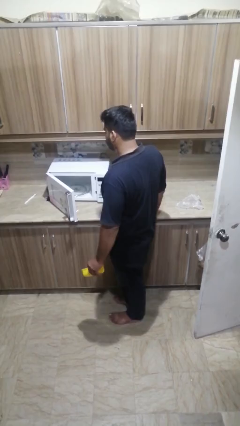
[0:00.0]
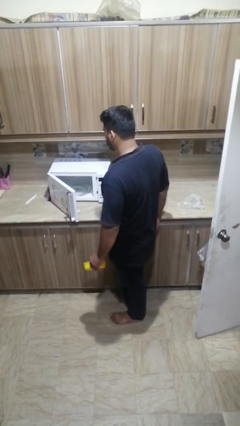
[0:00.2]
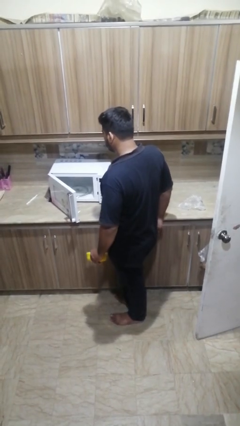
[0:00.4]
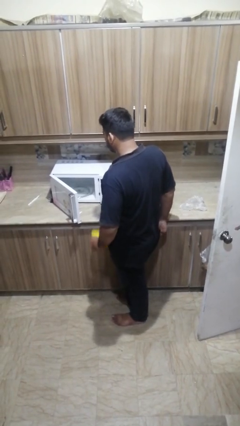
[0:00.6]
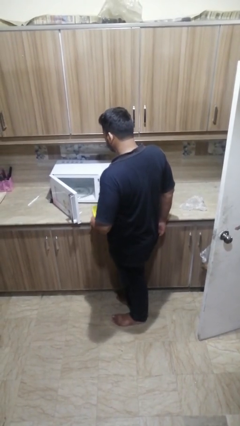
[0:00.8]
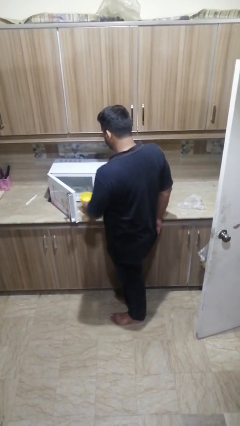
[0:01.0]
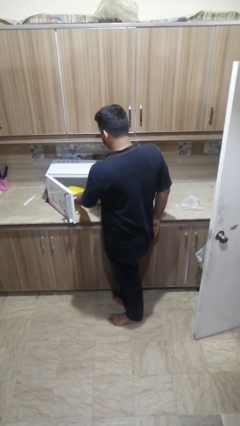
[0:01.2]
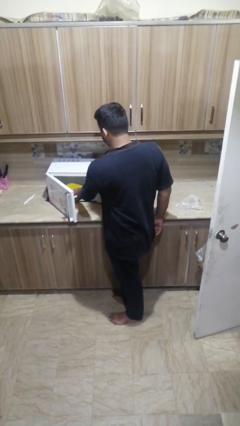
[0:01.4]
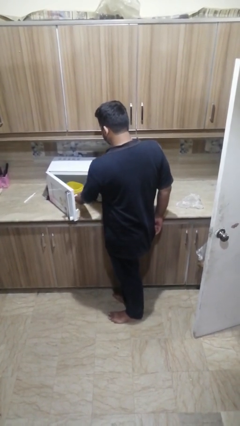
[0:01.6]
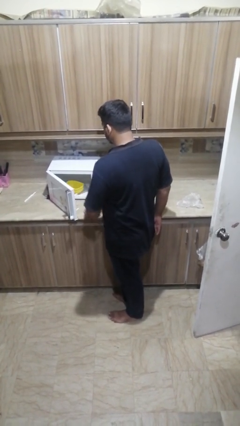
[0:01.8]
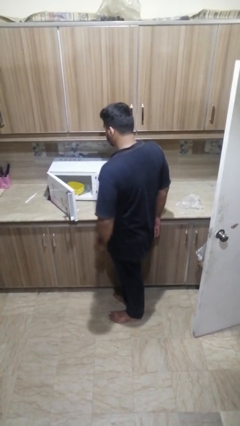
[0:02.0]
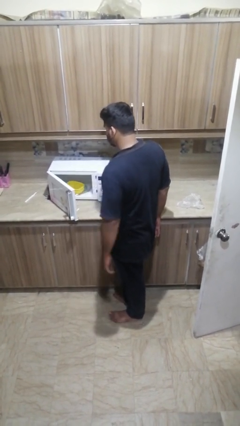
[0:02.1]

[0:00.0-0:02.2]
person puts object into microwave

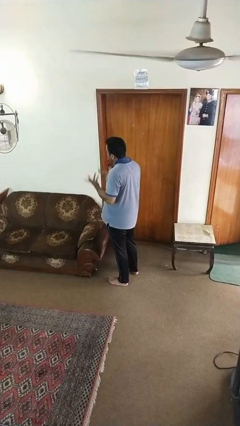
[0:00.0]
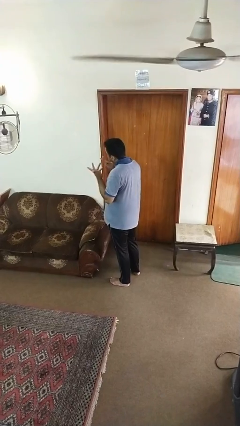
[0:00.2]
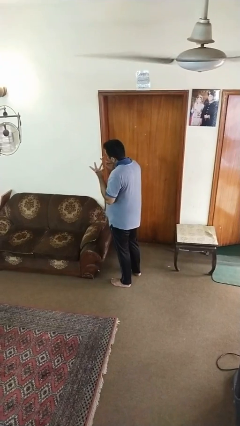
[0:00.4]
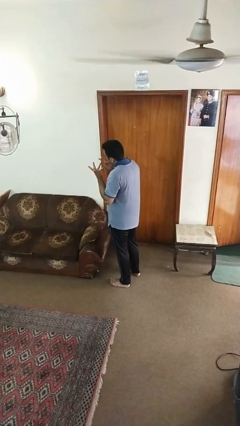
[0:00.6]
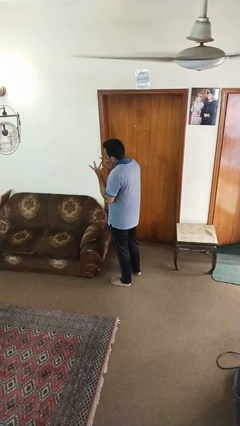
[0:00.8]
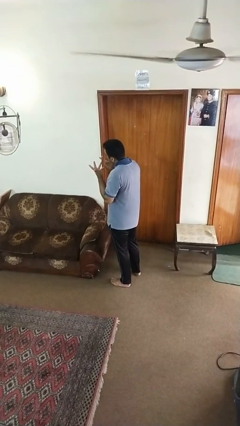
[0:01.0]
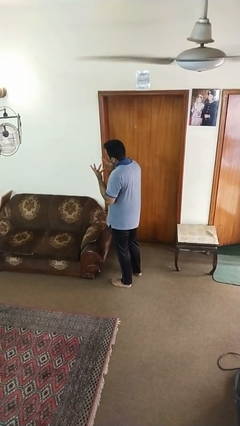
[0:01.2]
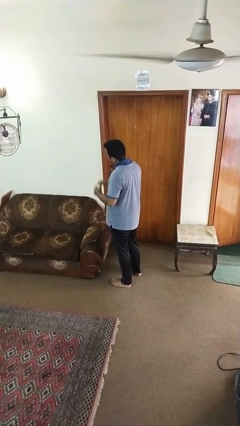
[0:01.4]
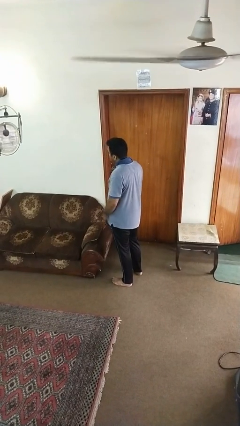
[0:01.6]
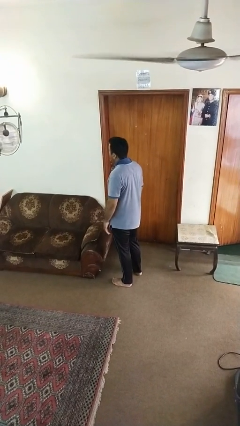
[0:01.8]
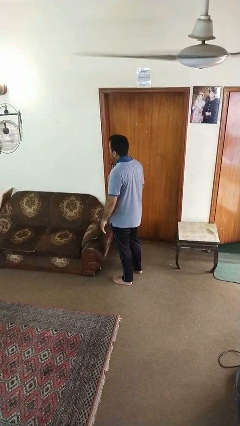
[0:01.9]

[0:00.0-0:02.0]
person shrugs

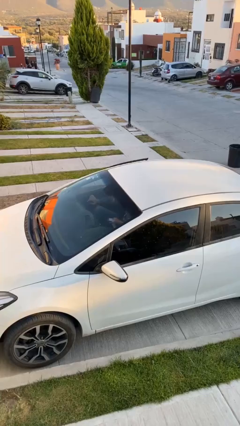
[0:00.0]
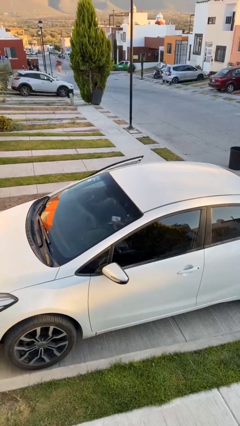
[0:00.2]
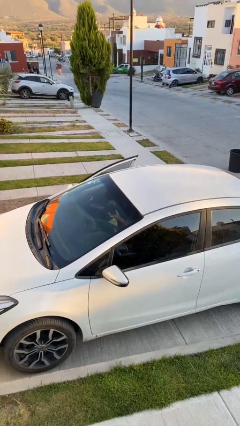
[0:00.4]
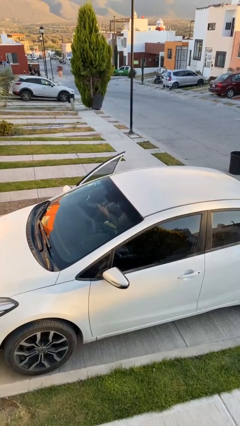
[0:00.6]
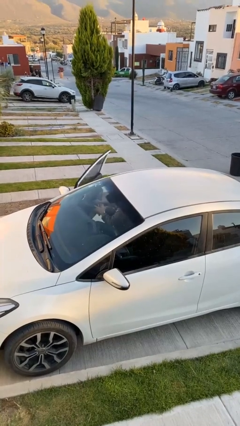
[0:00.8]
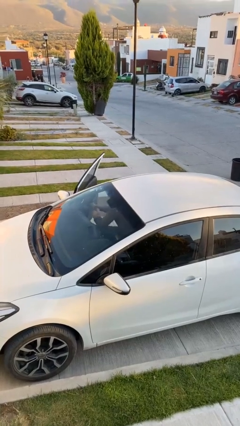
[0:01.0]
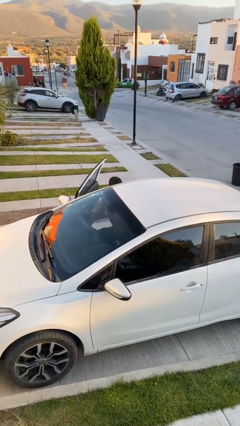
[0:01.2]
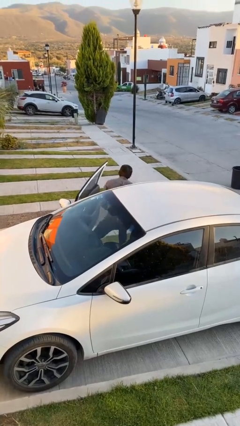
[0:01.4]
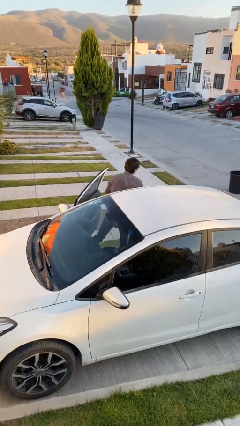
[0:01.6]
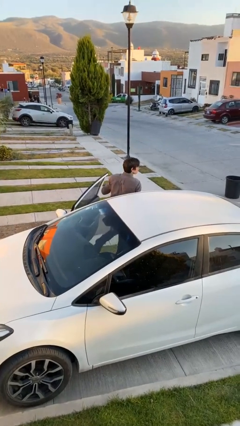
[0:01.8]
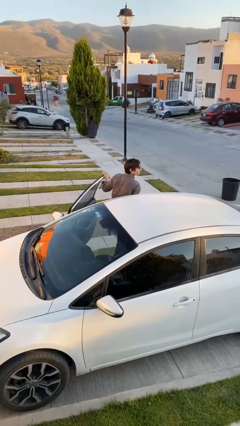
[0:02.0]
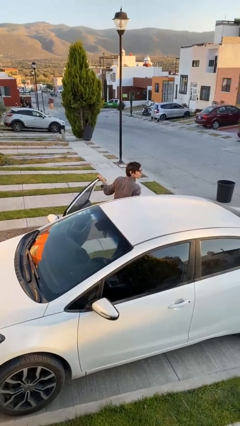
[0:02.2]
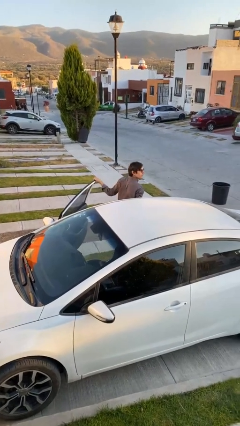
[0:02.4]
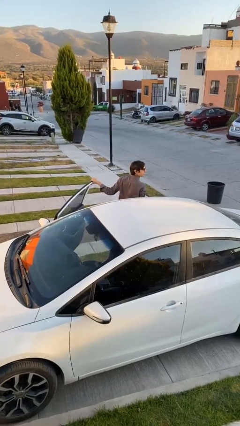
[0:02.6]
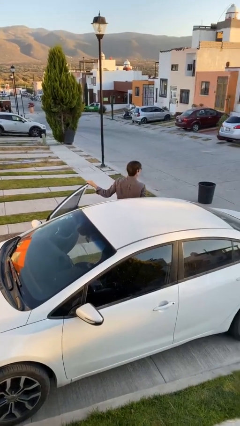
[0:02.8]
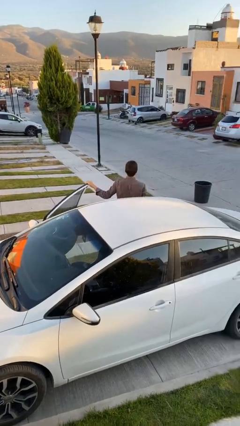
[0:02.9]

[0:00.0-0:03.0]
car drops off person

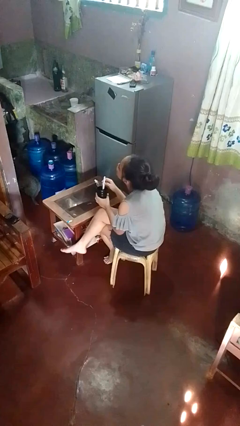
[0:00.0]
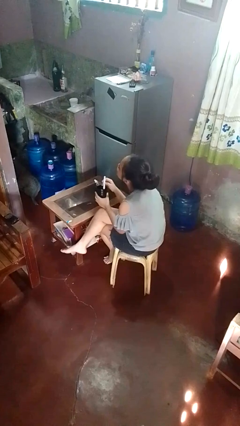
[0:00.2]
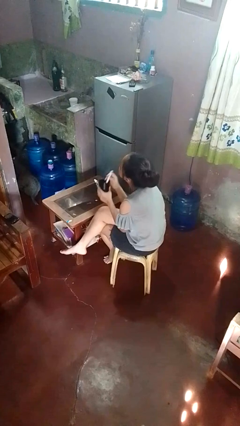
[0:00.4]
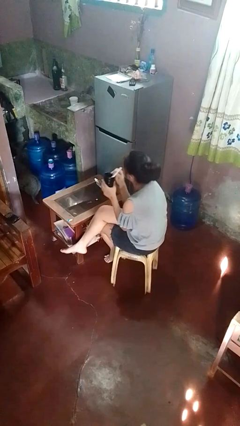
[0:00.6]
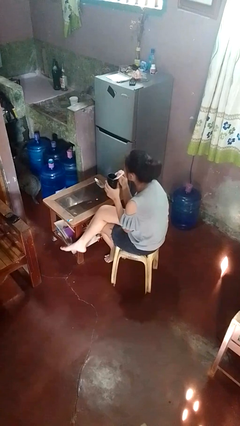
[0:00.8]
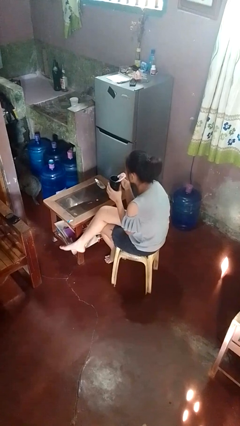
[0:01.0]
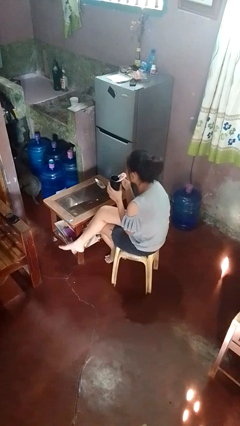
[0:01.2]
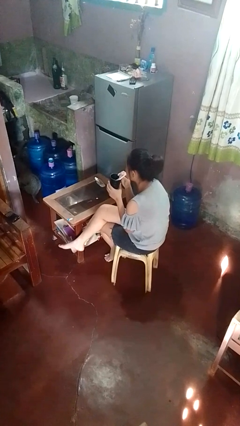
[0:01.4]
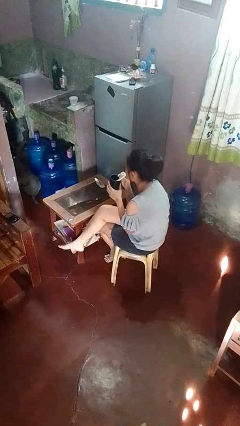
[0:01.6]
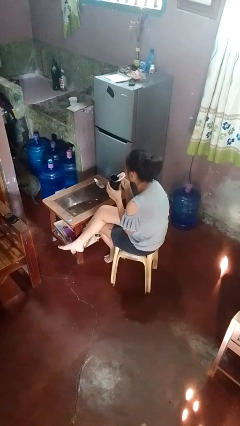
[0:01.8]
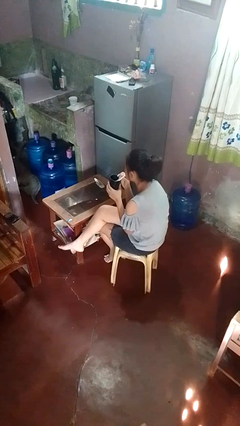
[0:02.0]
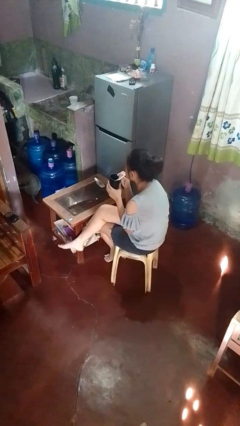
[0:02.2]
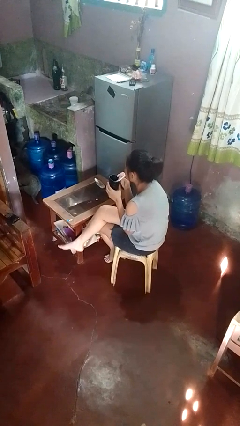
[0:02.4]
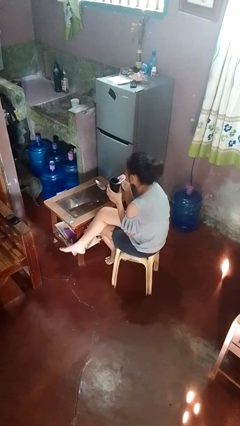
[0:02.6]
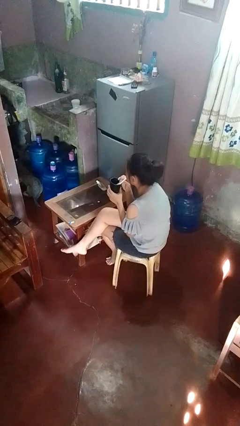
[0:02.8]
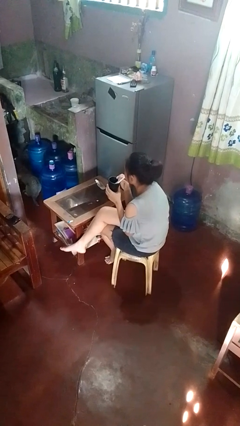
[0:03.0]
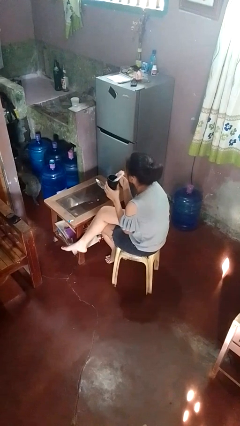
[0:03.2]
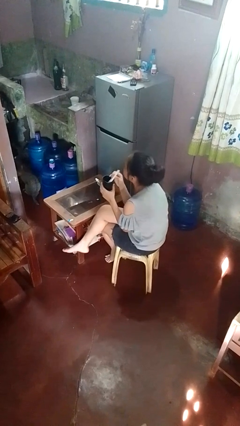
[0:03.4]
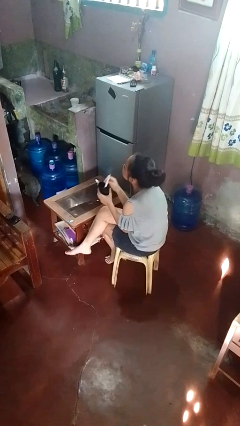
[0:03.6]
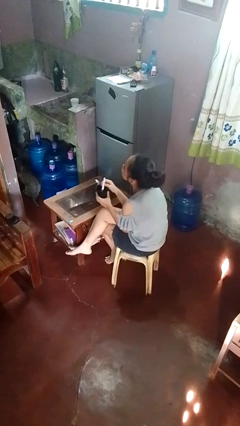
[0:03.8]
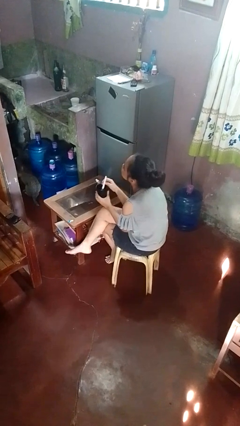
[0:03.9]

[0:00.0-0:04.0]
person drinks from straw

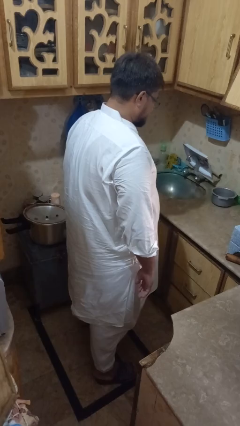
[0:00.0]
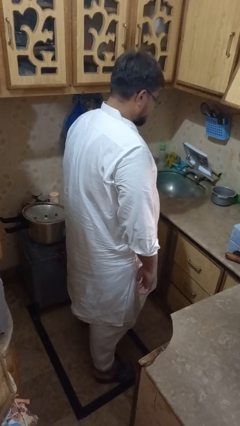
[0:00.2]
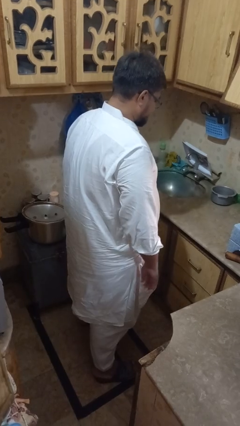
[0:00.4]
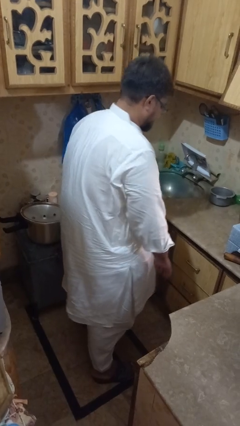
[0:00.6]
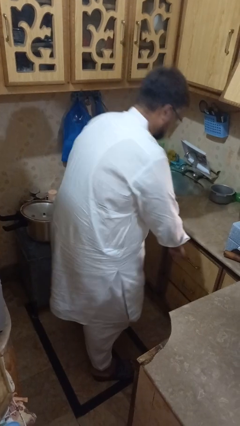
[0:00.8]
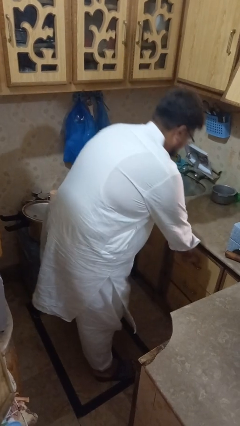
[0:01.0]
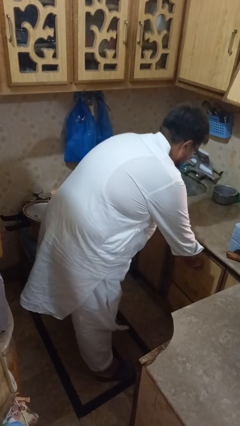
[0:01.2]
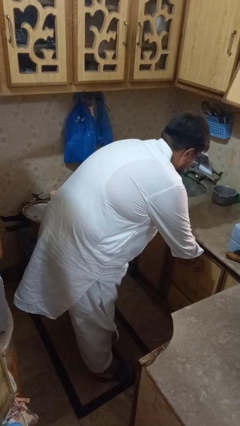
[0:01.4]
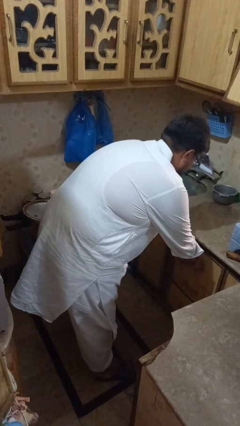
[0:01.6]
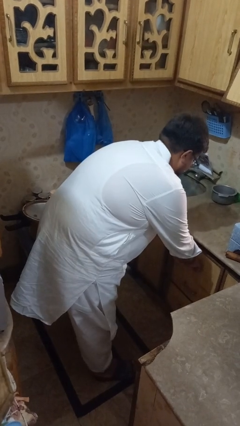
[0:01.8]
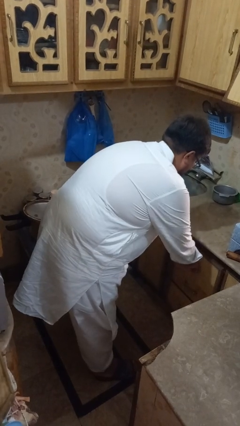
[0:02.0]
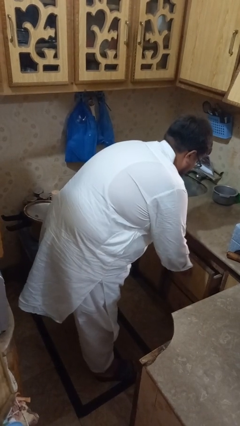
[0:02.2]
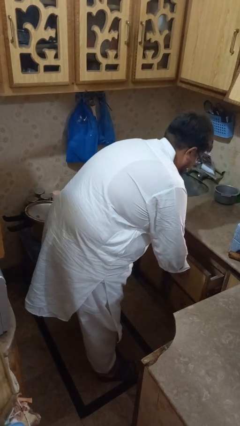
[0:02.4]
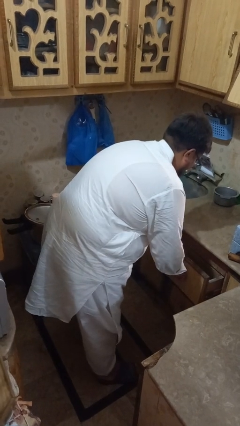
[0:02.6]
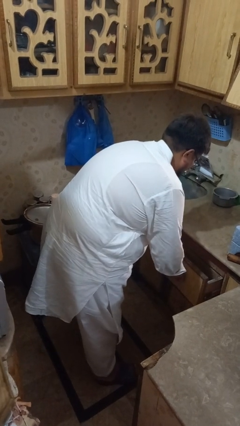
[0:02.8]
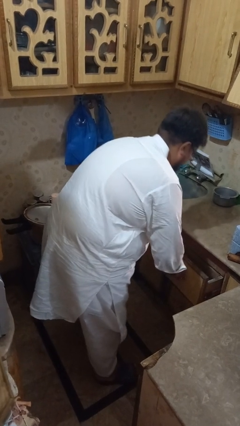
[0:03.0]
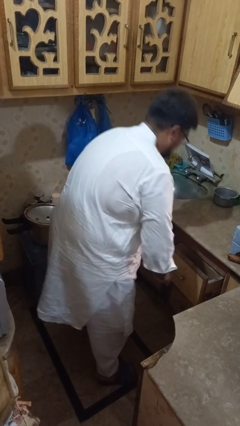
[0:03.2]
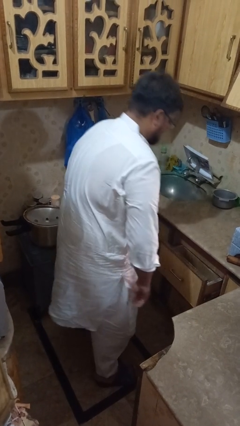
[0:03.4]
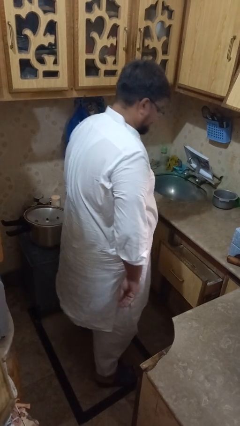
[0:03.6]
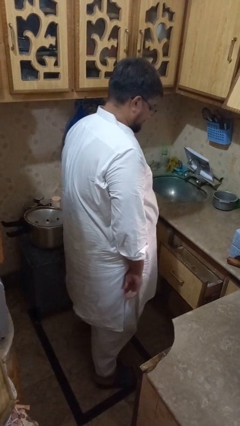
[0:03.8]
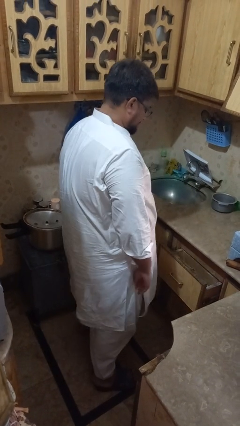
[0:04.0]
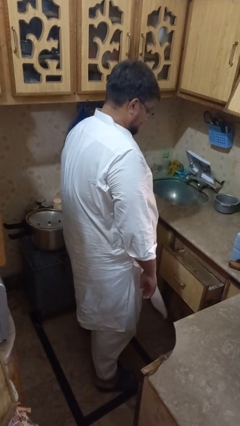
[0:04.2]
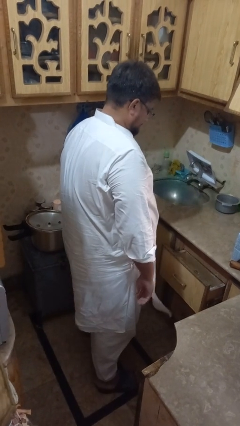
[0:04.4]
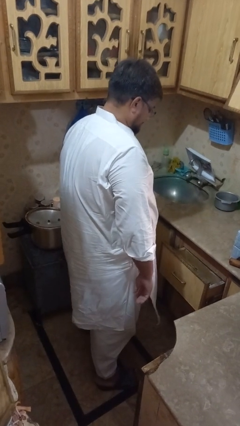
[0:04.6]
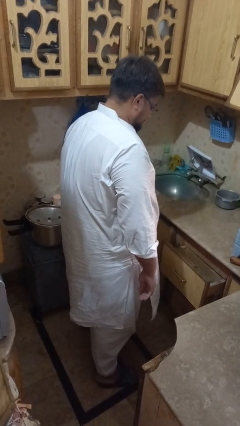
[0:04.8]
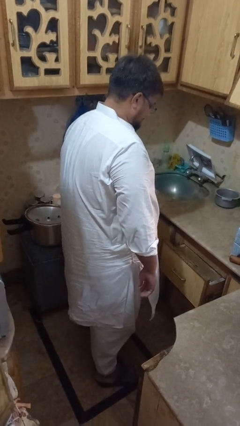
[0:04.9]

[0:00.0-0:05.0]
person opens kitchen drawer

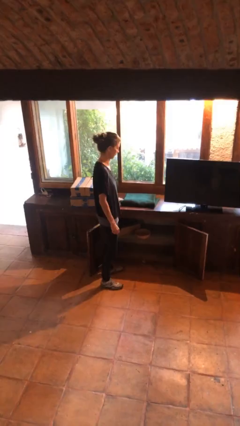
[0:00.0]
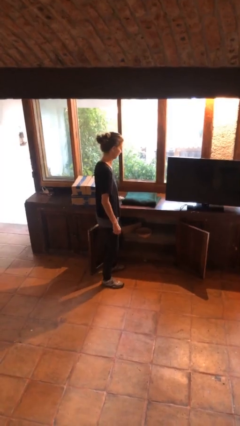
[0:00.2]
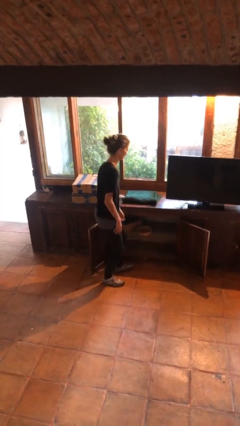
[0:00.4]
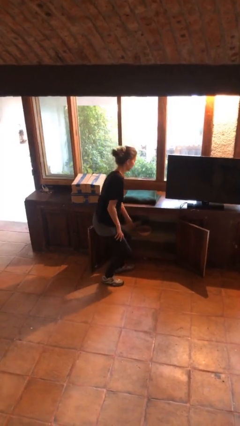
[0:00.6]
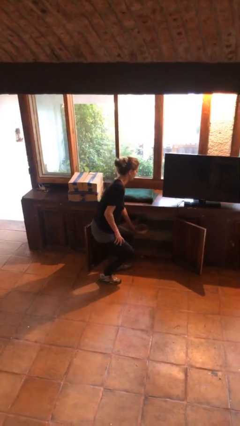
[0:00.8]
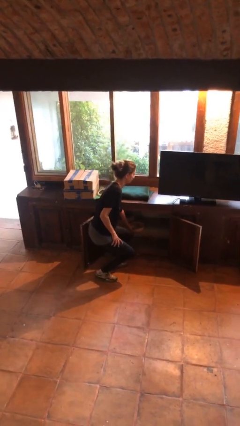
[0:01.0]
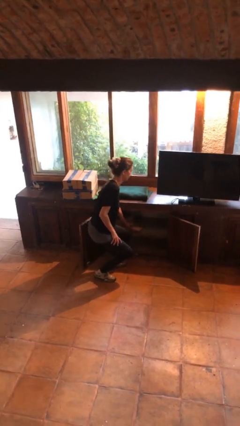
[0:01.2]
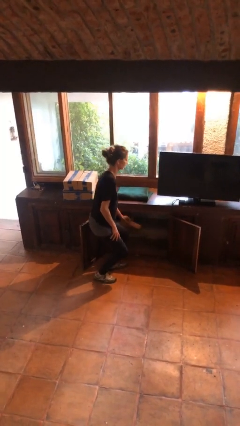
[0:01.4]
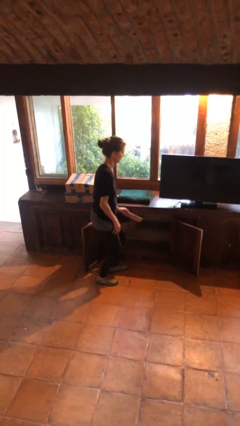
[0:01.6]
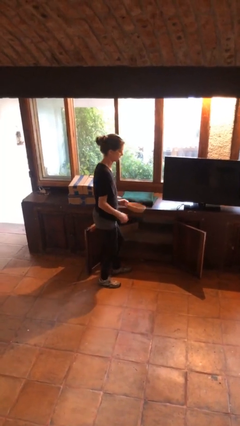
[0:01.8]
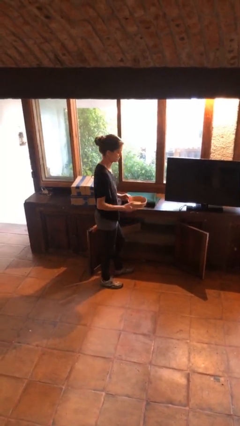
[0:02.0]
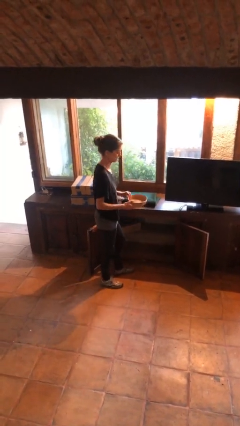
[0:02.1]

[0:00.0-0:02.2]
person picks up object from cabinet
